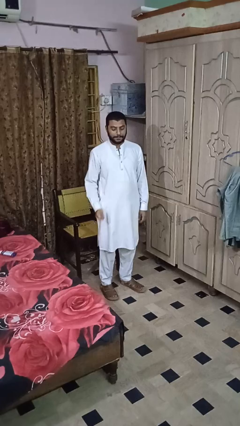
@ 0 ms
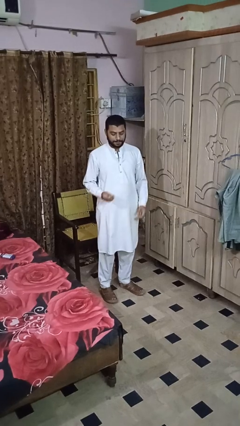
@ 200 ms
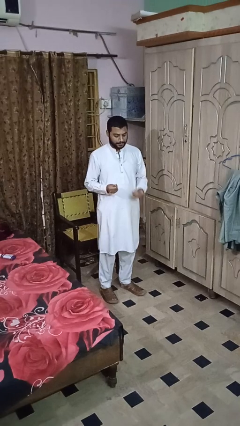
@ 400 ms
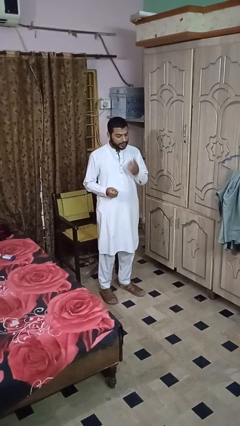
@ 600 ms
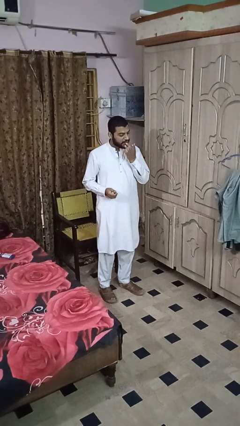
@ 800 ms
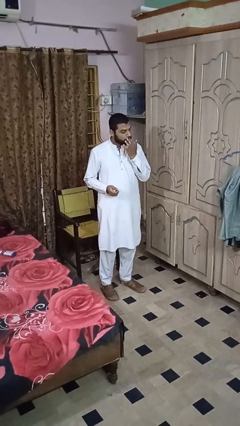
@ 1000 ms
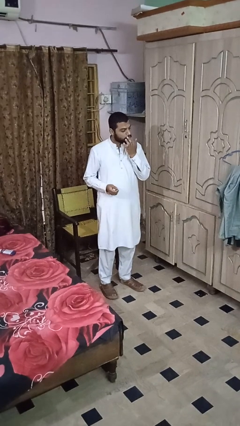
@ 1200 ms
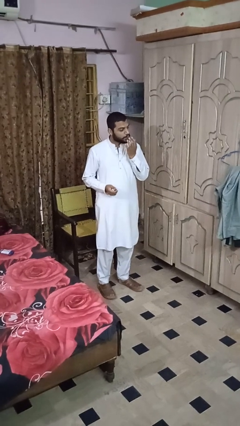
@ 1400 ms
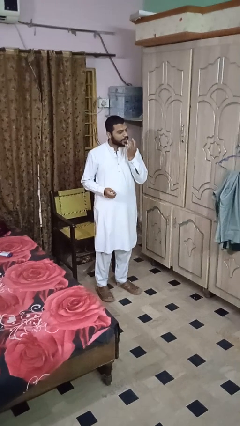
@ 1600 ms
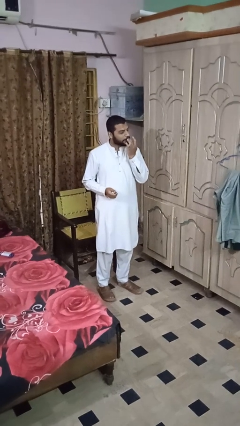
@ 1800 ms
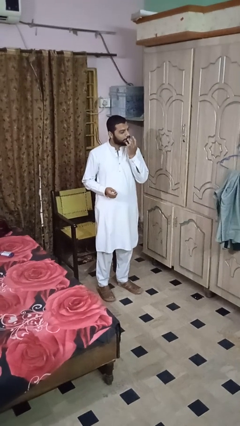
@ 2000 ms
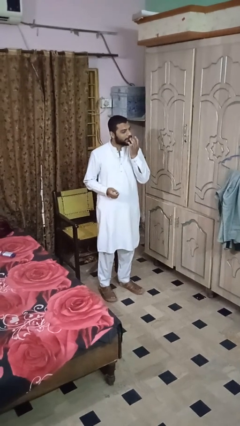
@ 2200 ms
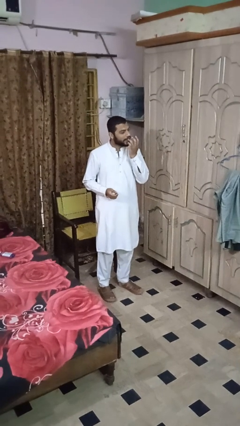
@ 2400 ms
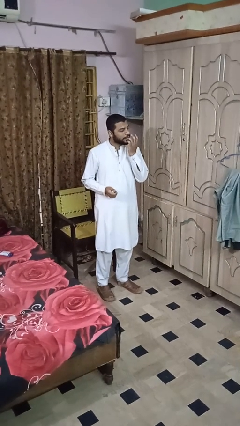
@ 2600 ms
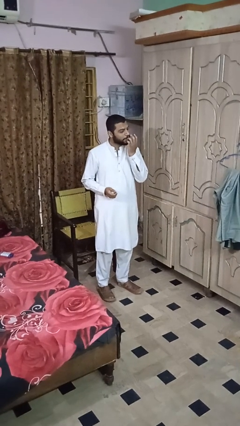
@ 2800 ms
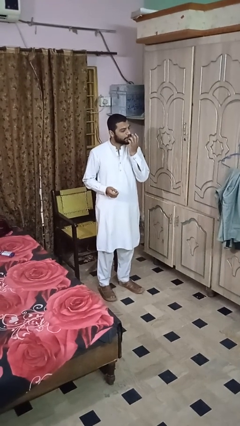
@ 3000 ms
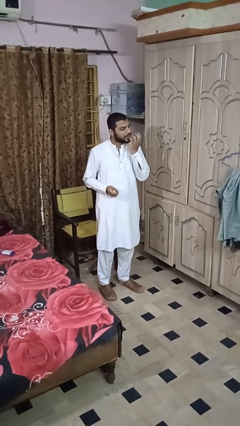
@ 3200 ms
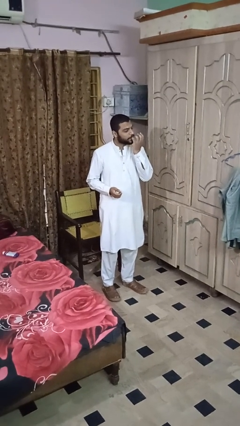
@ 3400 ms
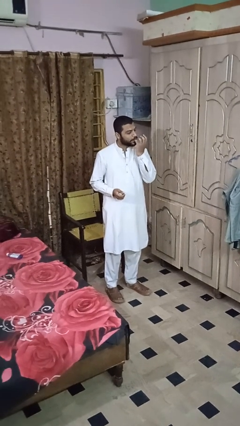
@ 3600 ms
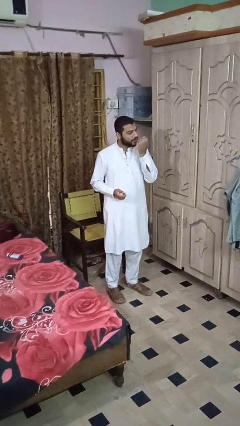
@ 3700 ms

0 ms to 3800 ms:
person licks fingers

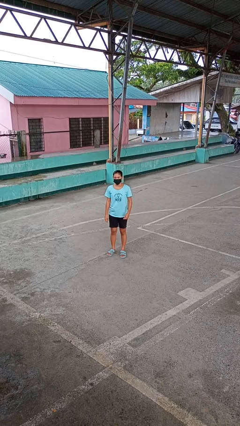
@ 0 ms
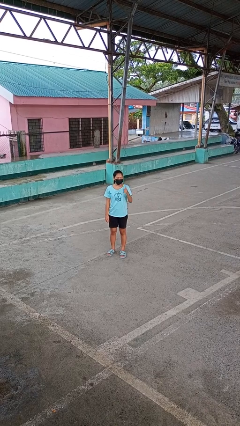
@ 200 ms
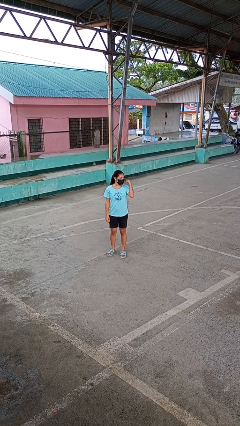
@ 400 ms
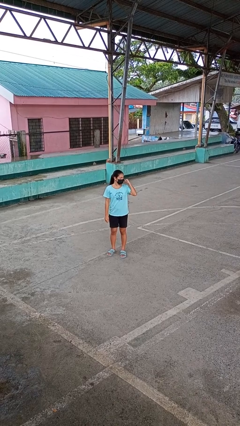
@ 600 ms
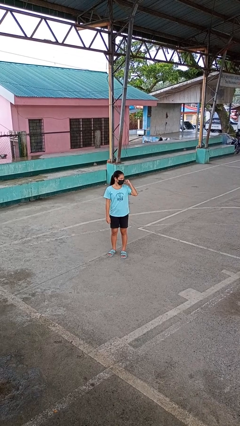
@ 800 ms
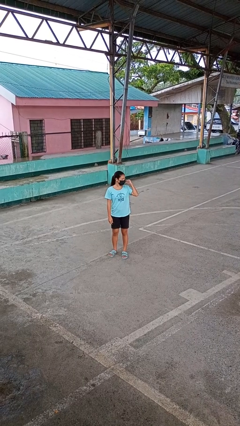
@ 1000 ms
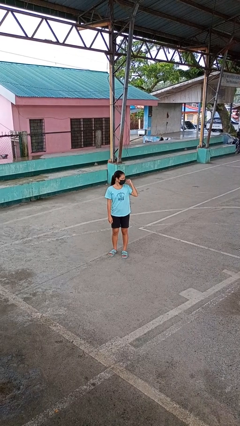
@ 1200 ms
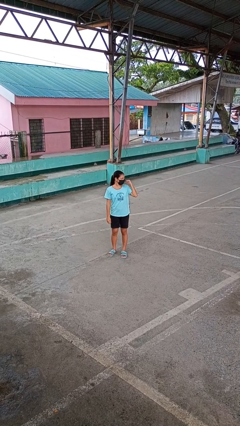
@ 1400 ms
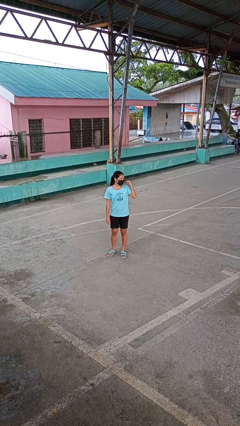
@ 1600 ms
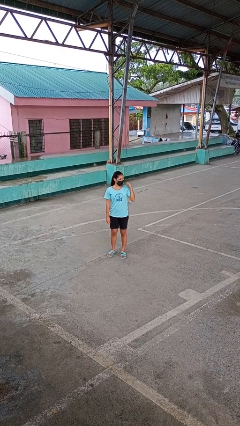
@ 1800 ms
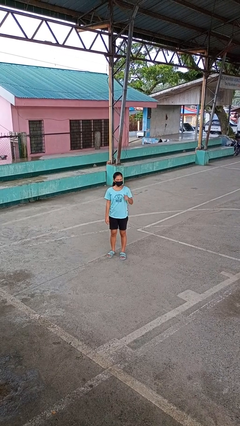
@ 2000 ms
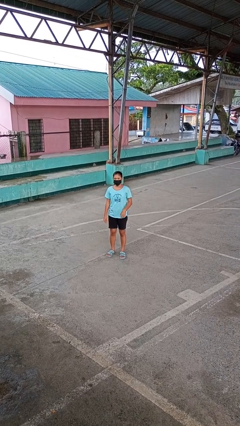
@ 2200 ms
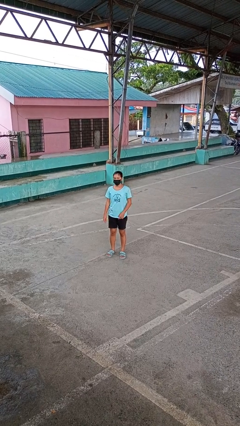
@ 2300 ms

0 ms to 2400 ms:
person gestures behind me

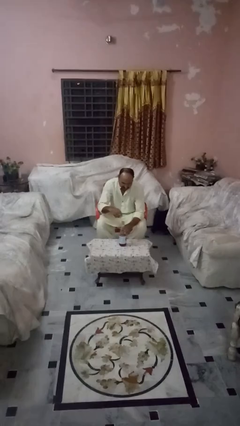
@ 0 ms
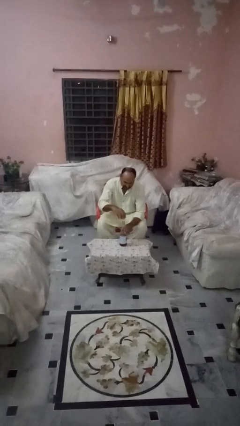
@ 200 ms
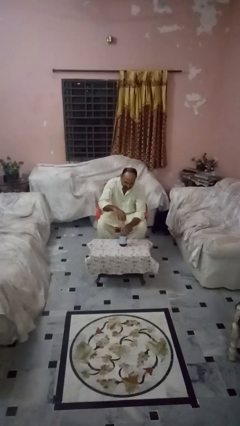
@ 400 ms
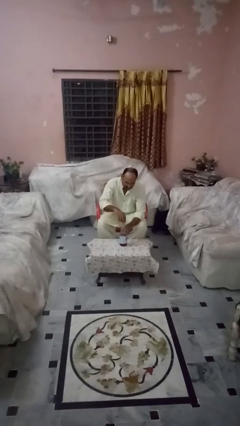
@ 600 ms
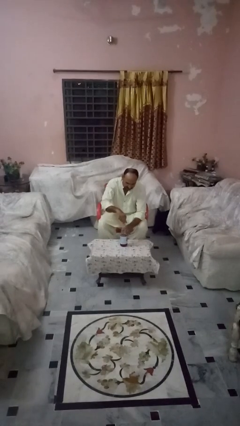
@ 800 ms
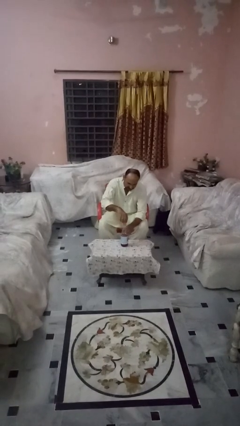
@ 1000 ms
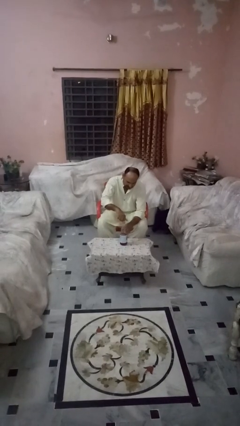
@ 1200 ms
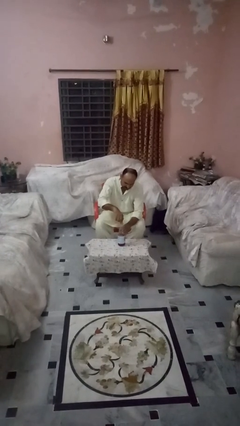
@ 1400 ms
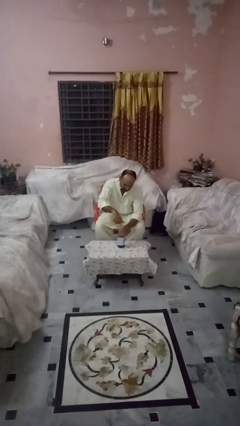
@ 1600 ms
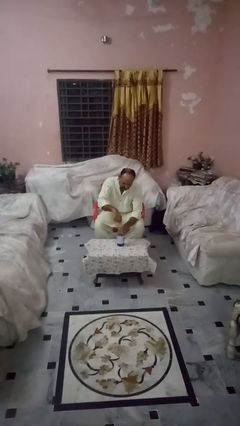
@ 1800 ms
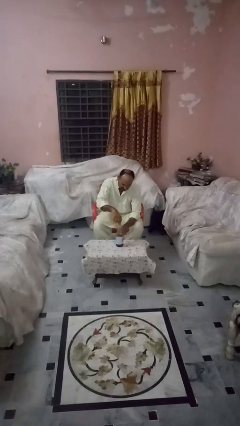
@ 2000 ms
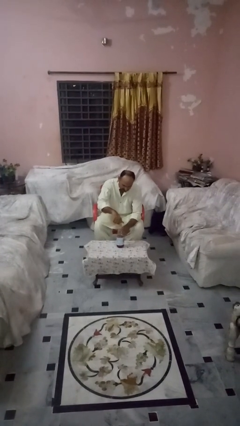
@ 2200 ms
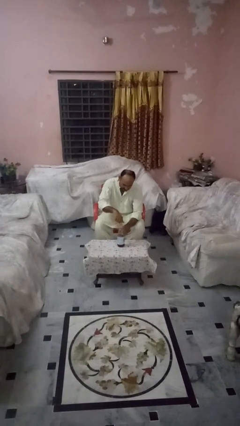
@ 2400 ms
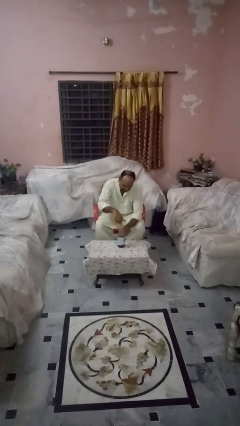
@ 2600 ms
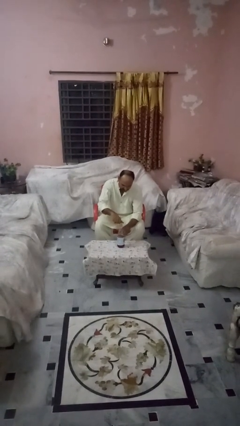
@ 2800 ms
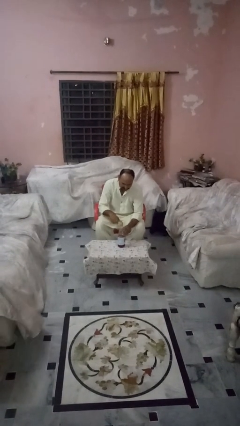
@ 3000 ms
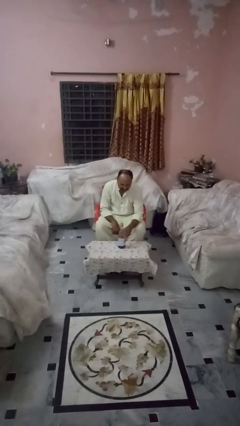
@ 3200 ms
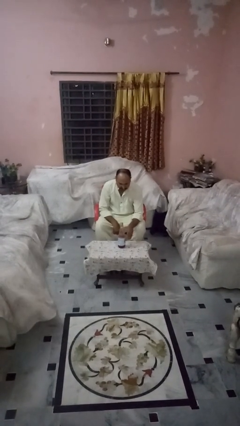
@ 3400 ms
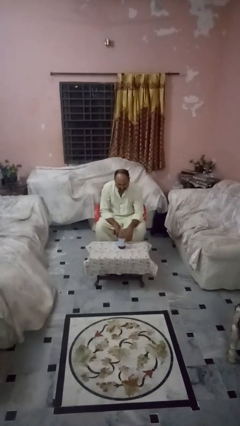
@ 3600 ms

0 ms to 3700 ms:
person screws lid to bottle

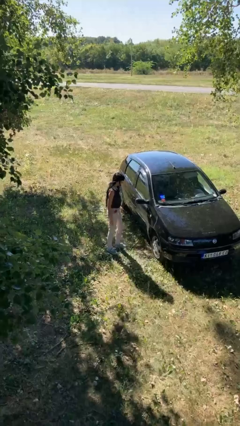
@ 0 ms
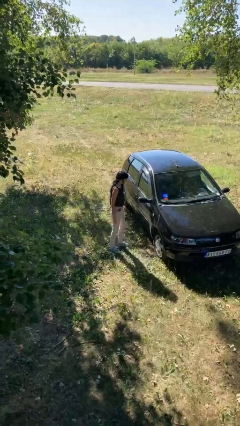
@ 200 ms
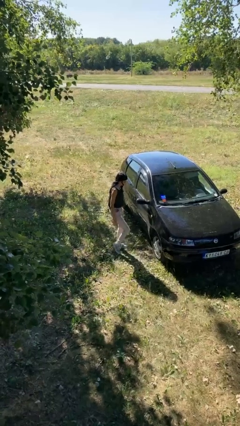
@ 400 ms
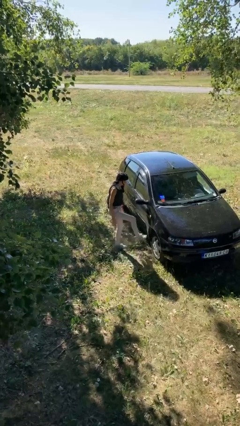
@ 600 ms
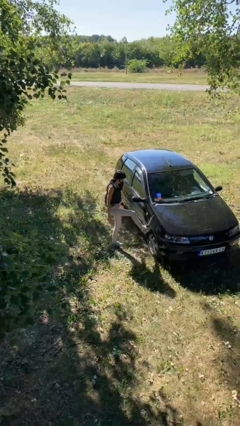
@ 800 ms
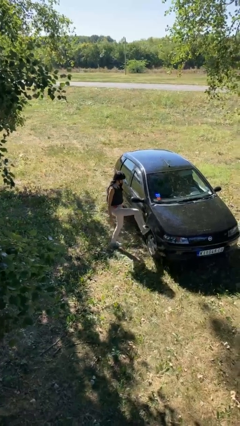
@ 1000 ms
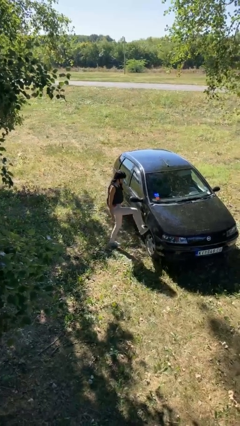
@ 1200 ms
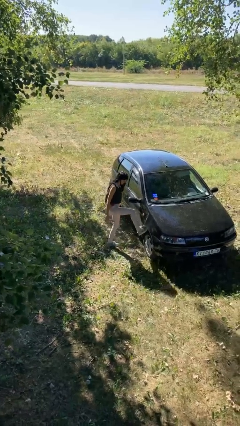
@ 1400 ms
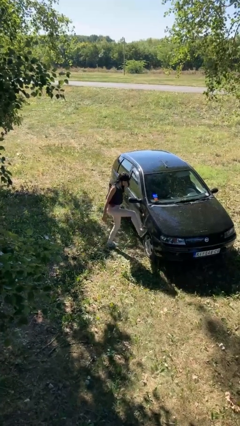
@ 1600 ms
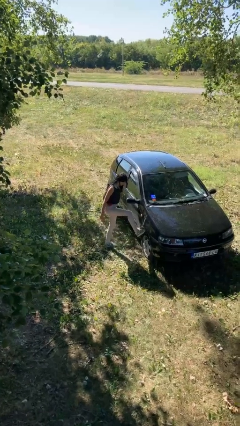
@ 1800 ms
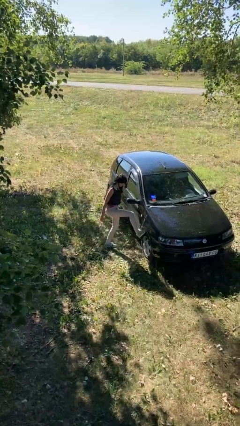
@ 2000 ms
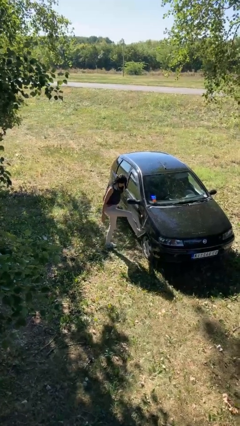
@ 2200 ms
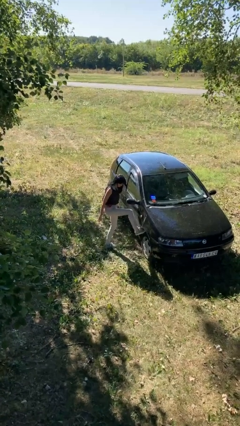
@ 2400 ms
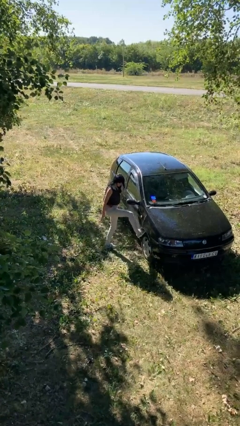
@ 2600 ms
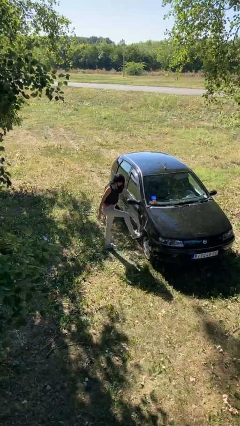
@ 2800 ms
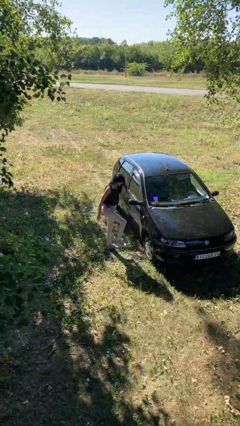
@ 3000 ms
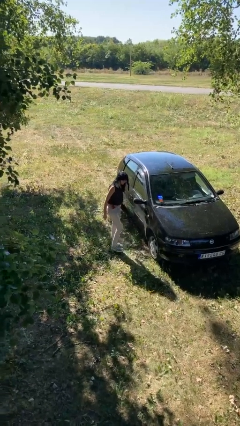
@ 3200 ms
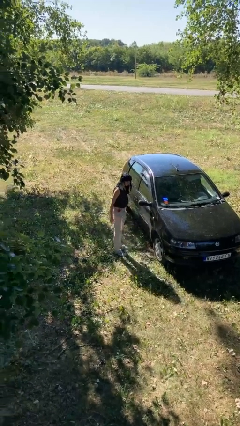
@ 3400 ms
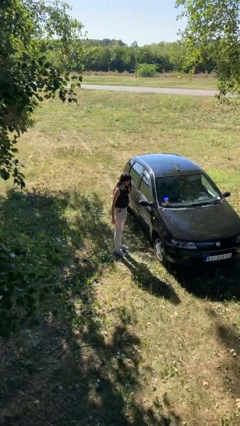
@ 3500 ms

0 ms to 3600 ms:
person kicks car tires

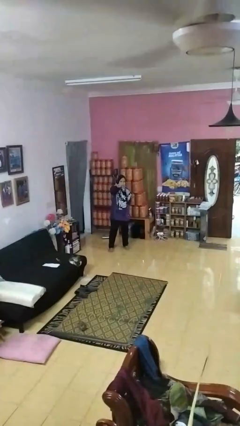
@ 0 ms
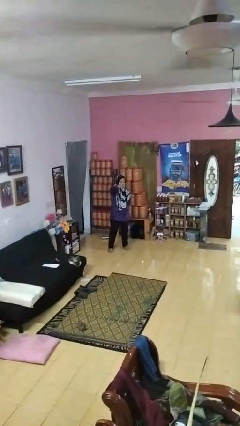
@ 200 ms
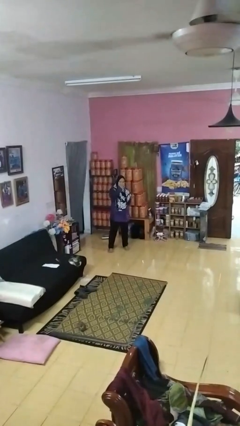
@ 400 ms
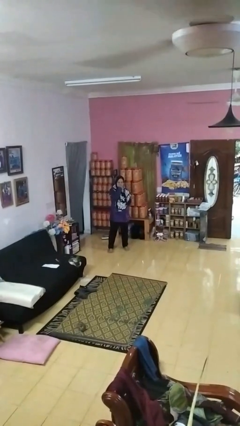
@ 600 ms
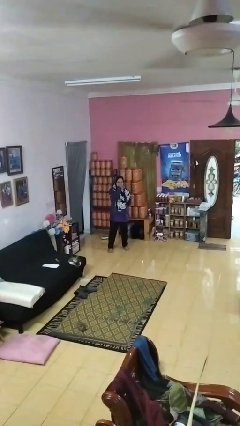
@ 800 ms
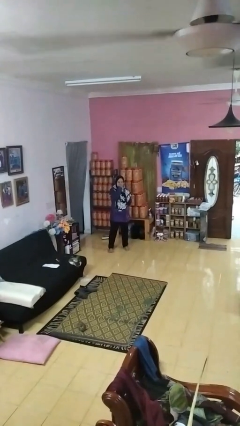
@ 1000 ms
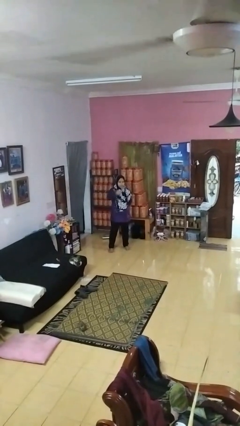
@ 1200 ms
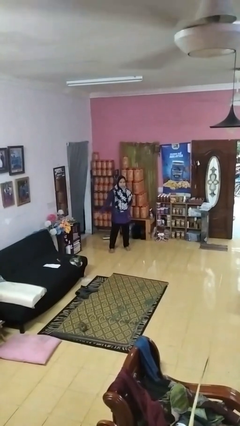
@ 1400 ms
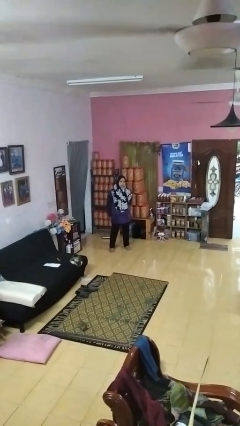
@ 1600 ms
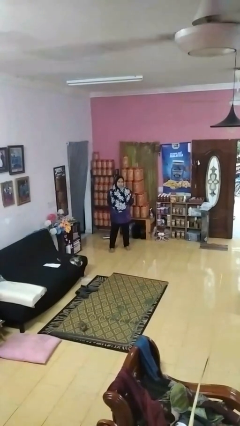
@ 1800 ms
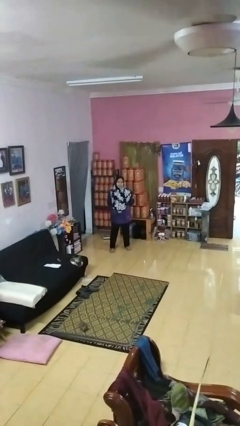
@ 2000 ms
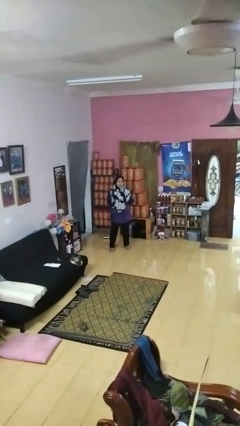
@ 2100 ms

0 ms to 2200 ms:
person gestures watch closely

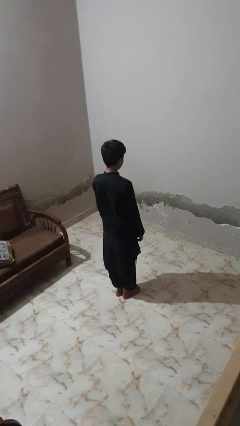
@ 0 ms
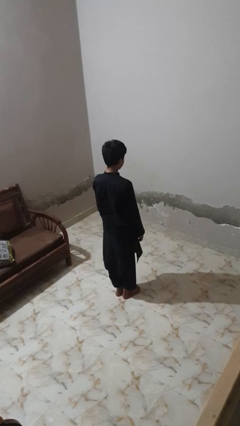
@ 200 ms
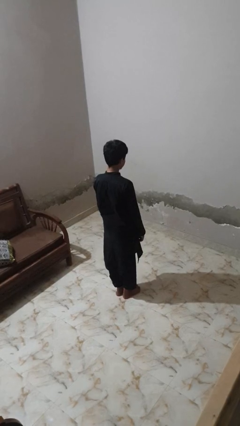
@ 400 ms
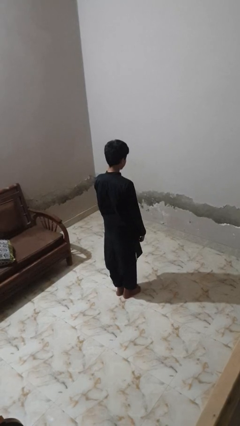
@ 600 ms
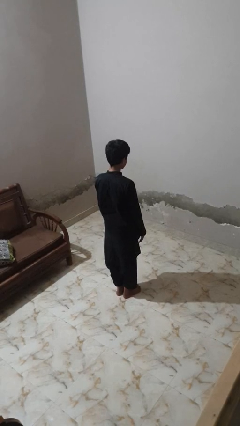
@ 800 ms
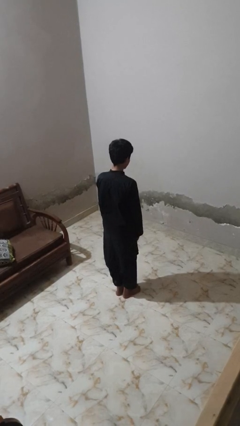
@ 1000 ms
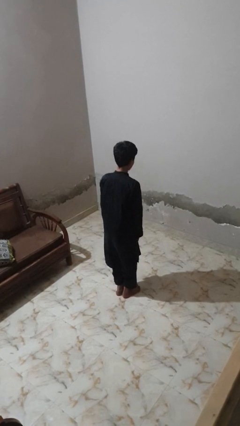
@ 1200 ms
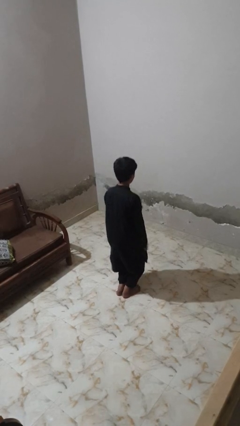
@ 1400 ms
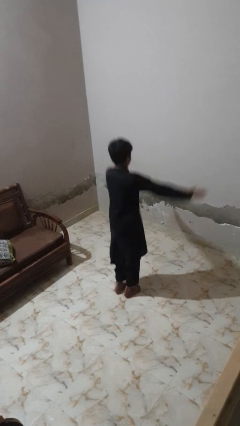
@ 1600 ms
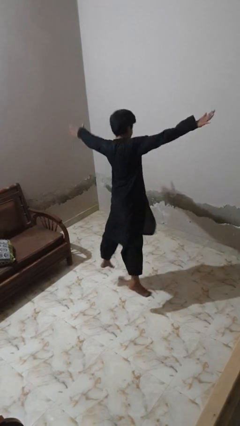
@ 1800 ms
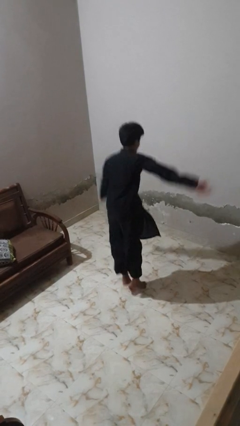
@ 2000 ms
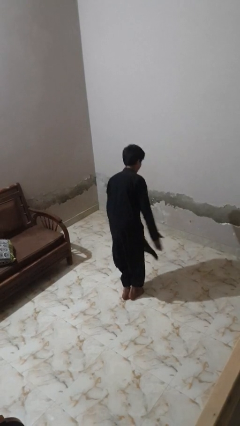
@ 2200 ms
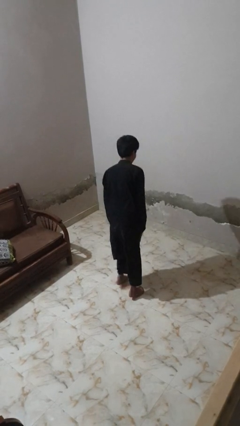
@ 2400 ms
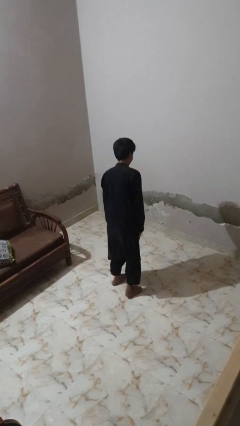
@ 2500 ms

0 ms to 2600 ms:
person exercises with jumping jacks
